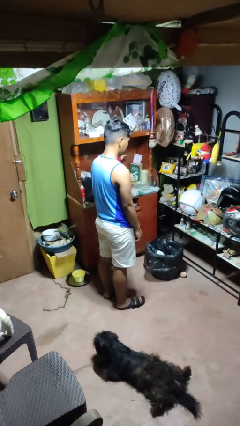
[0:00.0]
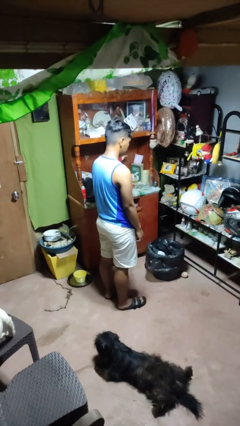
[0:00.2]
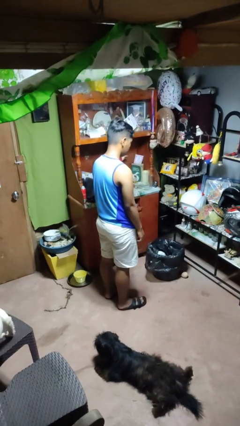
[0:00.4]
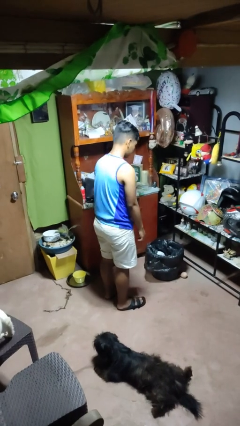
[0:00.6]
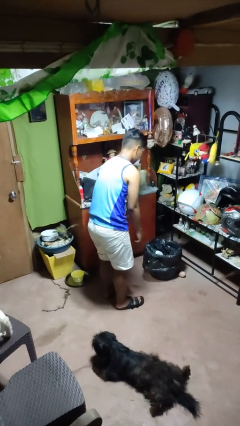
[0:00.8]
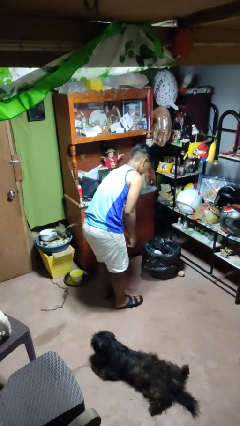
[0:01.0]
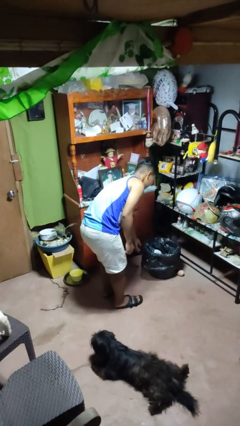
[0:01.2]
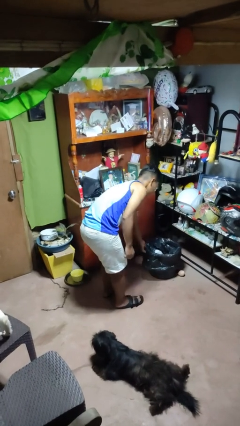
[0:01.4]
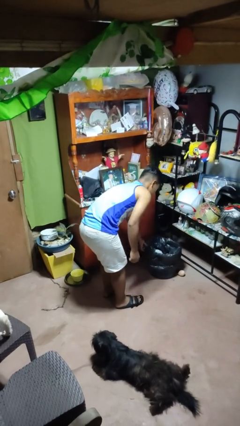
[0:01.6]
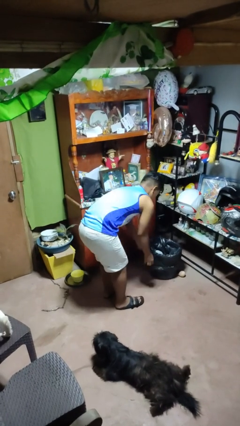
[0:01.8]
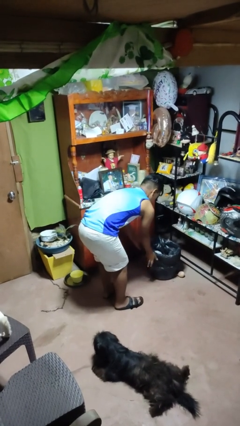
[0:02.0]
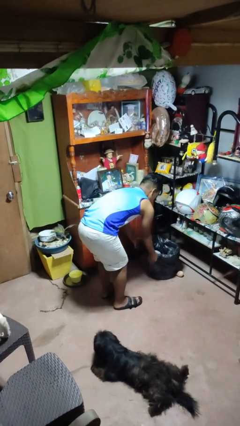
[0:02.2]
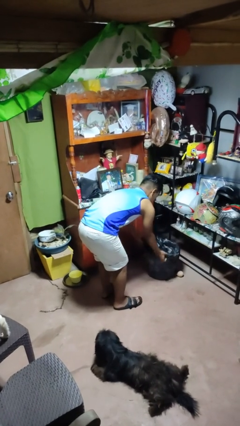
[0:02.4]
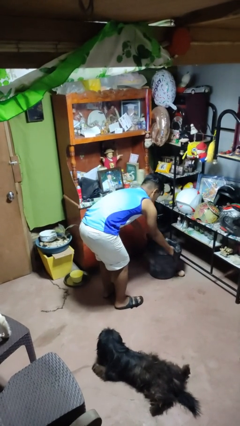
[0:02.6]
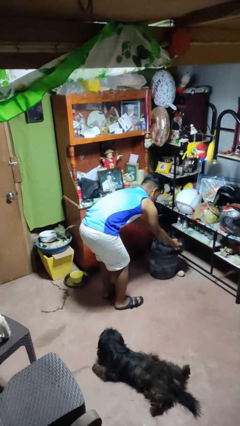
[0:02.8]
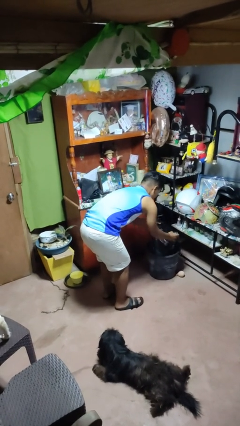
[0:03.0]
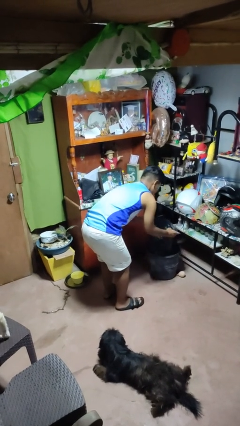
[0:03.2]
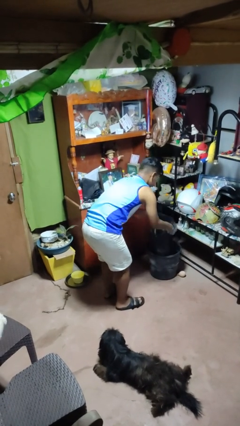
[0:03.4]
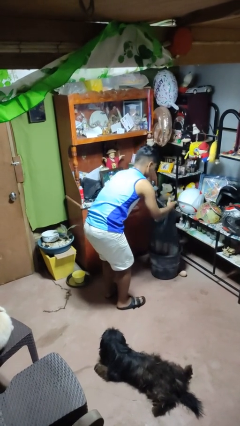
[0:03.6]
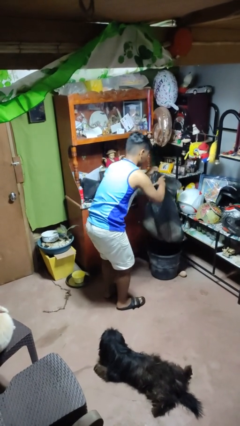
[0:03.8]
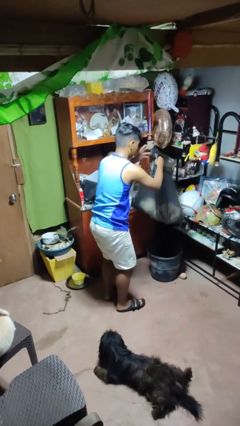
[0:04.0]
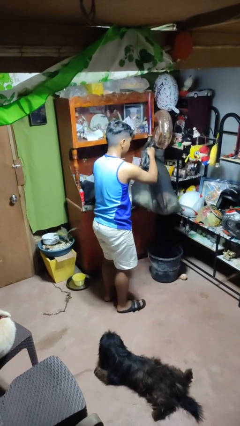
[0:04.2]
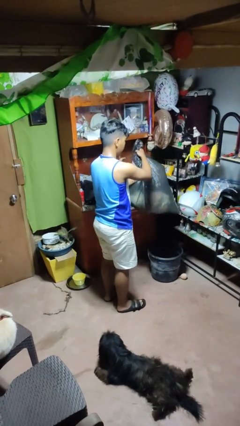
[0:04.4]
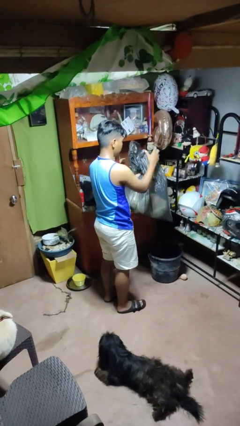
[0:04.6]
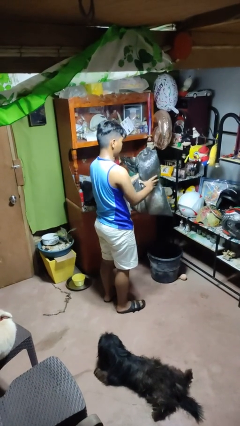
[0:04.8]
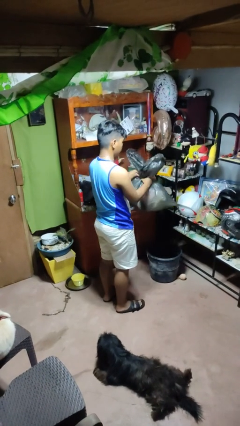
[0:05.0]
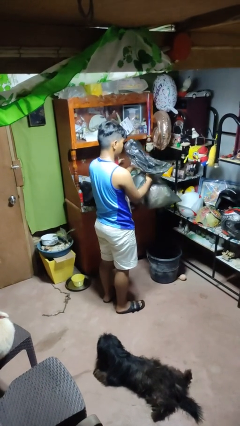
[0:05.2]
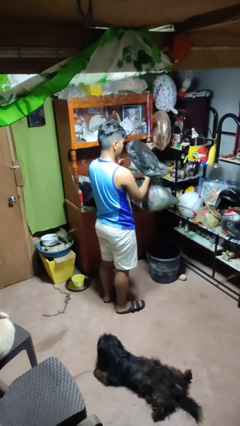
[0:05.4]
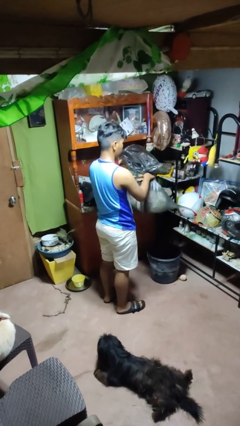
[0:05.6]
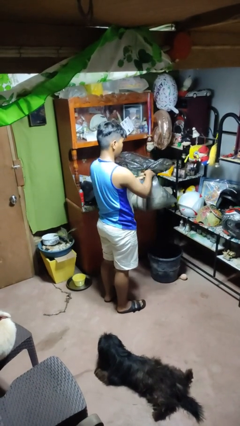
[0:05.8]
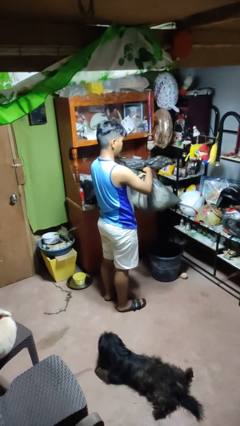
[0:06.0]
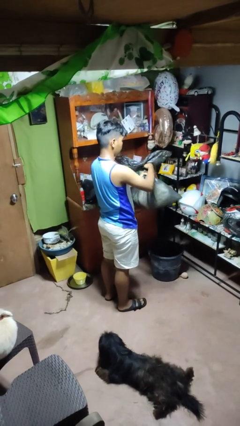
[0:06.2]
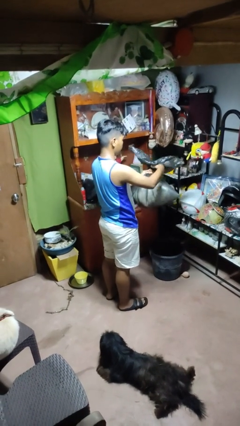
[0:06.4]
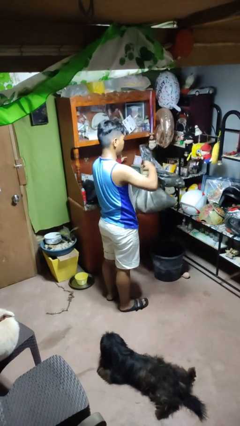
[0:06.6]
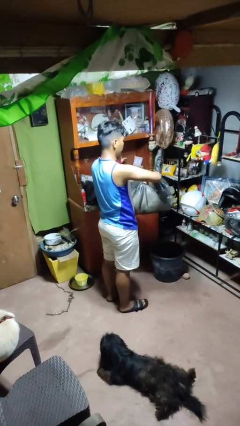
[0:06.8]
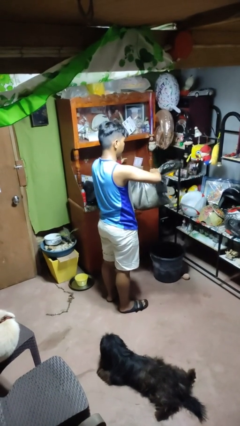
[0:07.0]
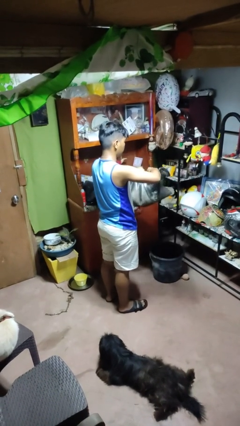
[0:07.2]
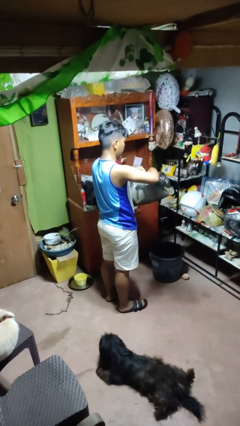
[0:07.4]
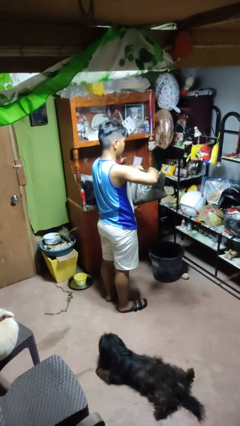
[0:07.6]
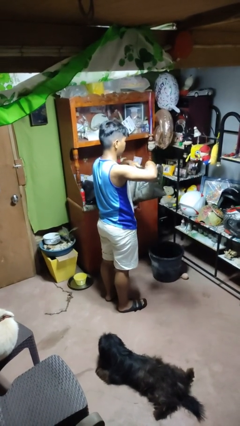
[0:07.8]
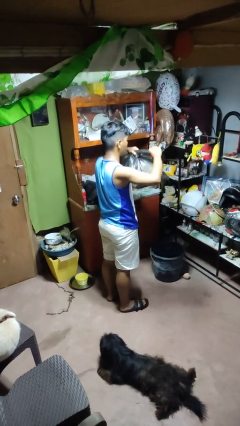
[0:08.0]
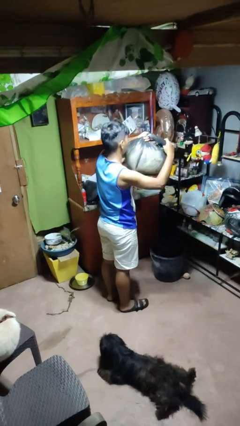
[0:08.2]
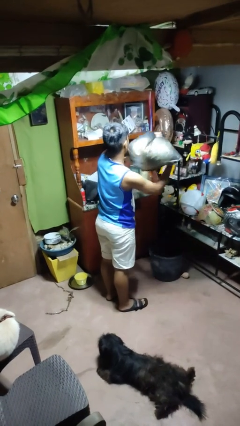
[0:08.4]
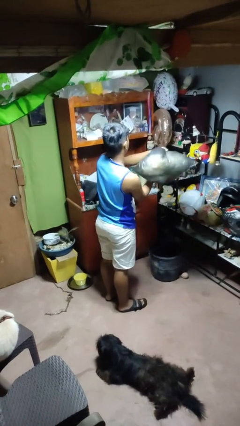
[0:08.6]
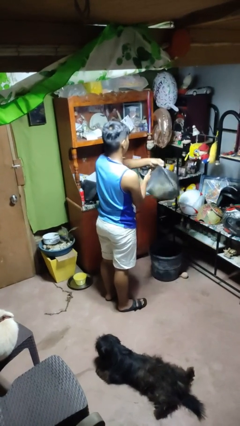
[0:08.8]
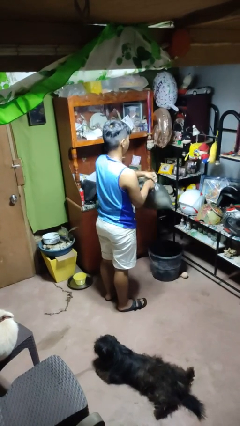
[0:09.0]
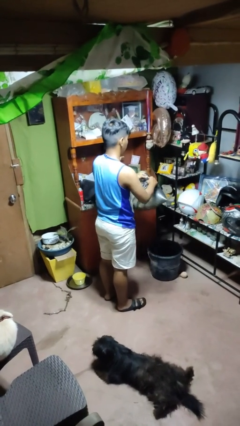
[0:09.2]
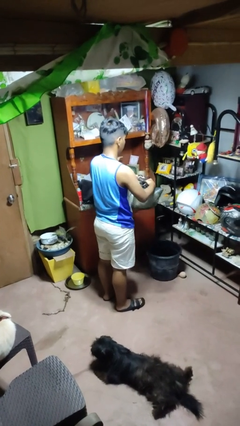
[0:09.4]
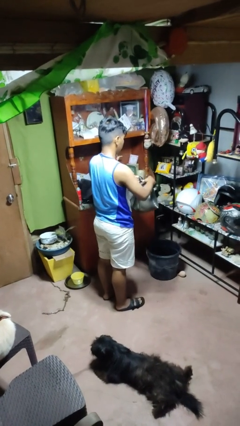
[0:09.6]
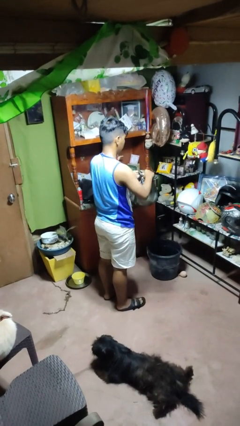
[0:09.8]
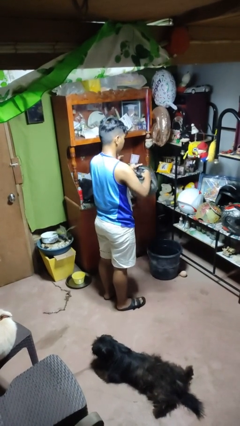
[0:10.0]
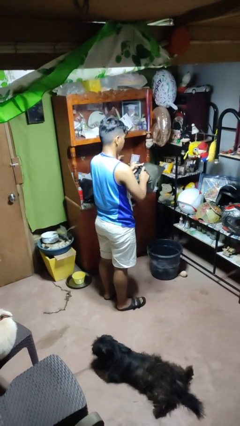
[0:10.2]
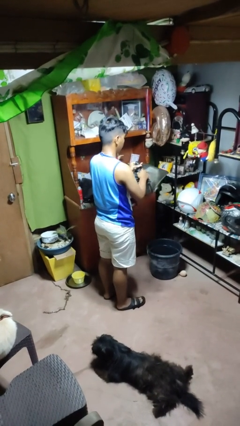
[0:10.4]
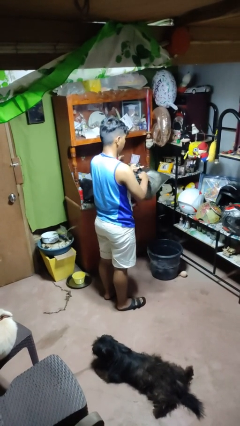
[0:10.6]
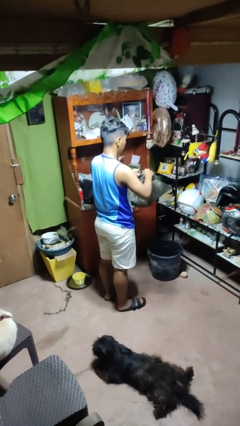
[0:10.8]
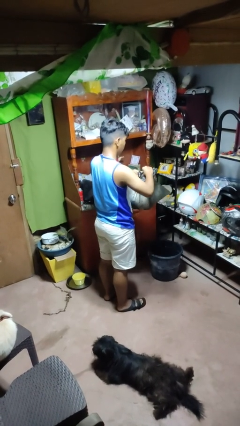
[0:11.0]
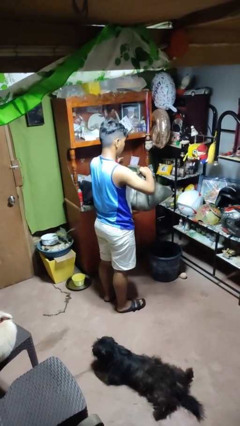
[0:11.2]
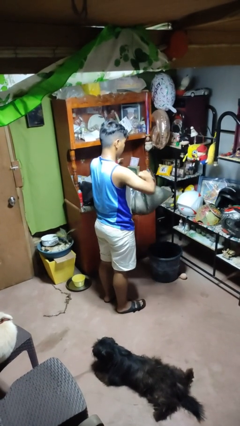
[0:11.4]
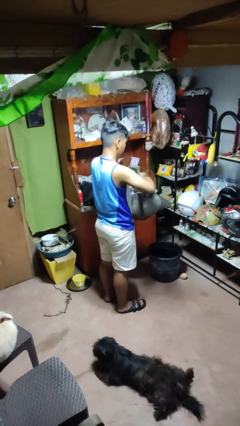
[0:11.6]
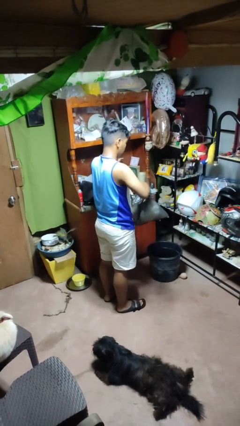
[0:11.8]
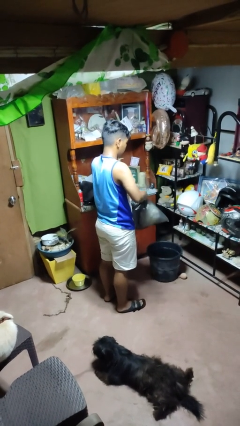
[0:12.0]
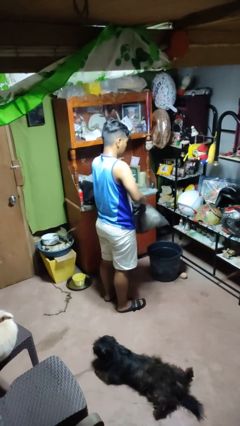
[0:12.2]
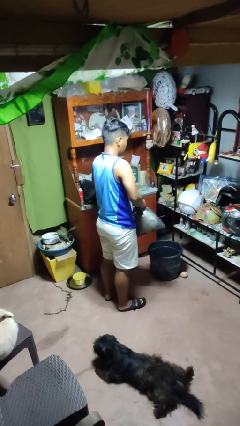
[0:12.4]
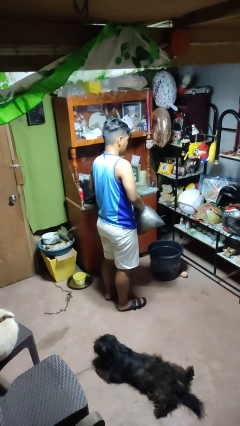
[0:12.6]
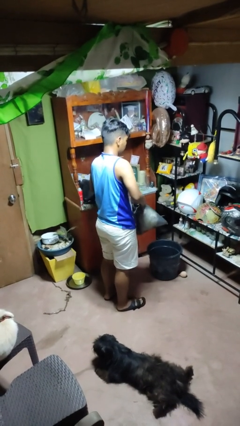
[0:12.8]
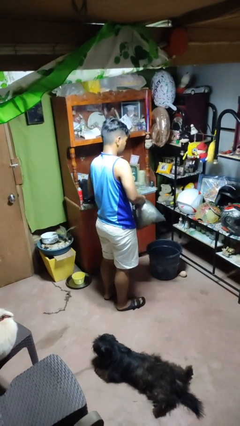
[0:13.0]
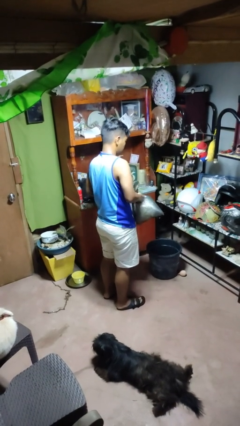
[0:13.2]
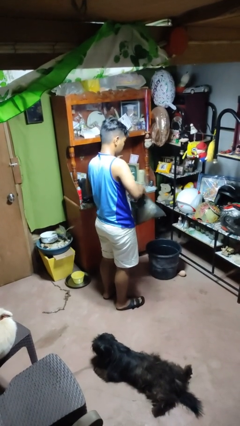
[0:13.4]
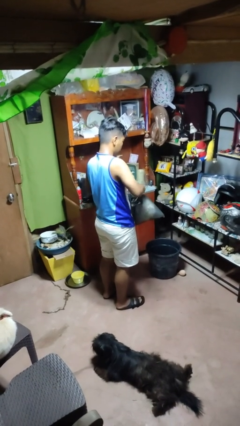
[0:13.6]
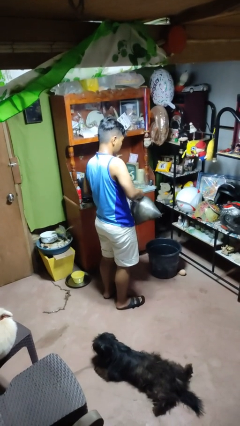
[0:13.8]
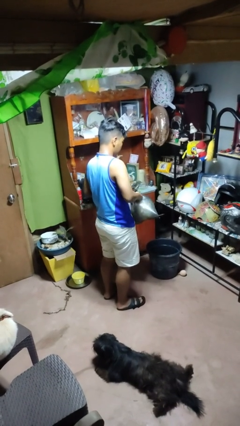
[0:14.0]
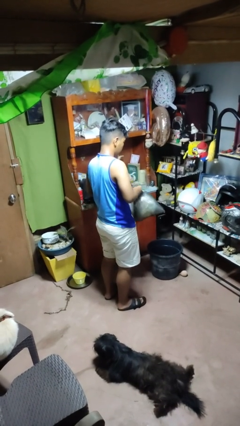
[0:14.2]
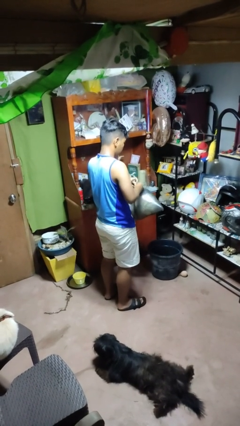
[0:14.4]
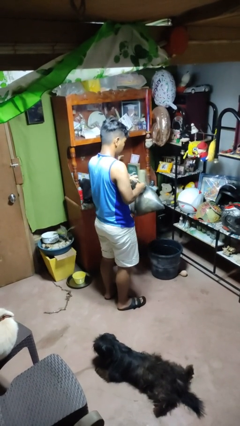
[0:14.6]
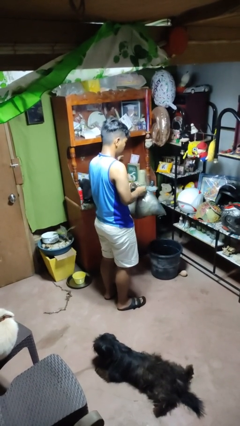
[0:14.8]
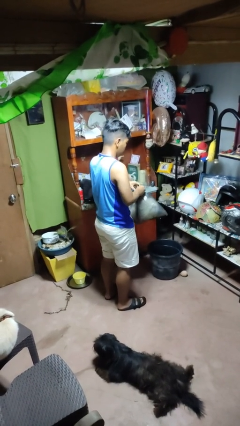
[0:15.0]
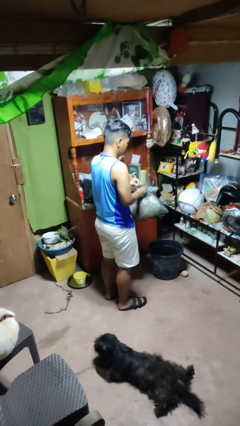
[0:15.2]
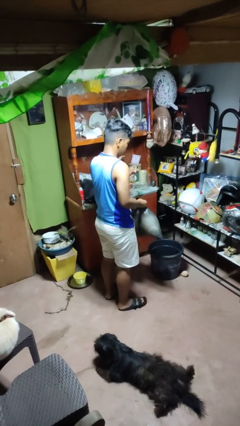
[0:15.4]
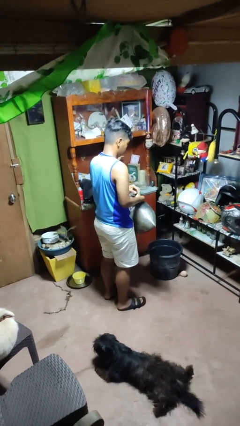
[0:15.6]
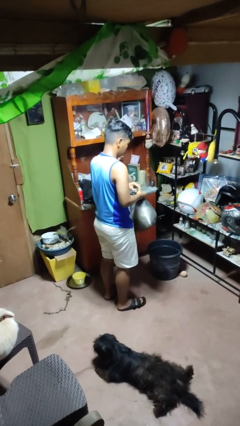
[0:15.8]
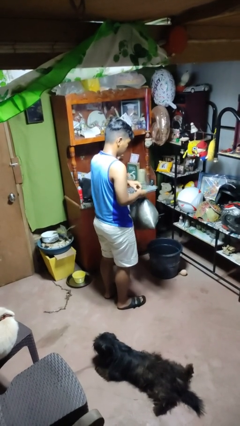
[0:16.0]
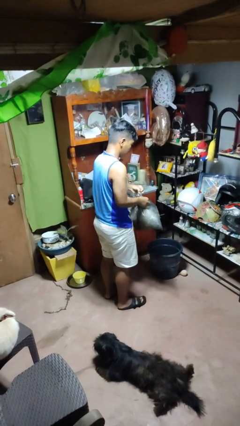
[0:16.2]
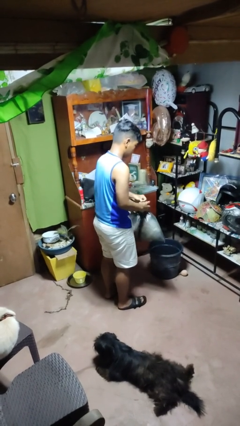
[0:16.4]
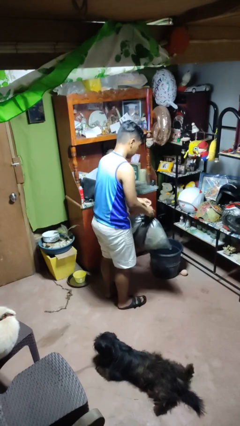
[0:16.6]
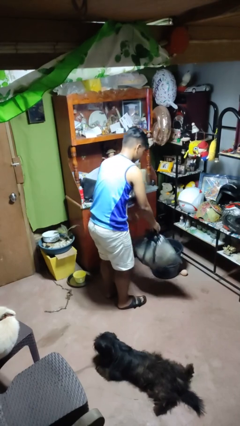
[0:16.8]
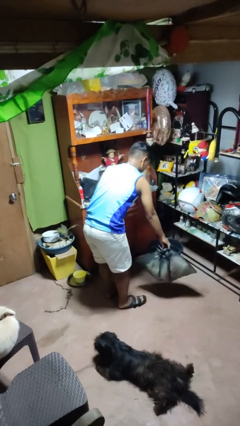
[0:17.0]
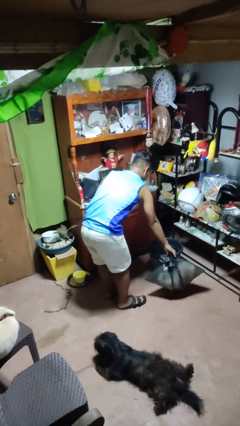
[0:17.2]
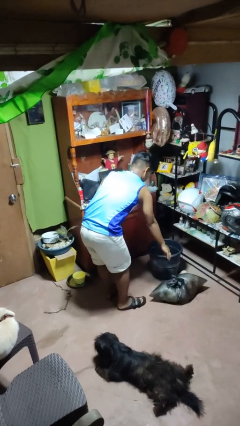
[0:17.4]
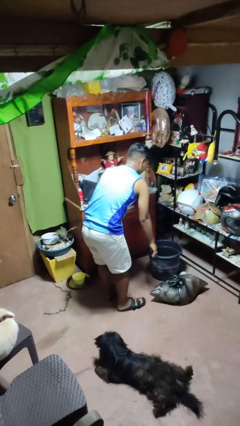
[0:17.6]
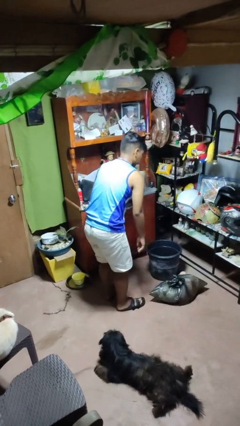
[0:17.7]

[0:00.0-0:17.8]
person removes trashbag from trashcan

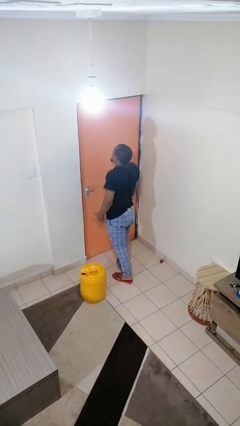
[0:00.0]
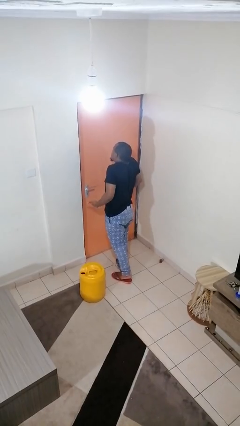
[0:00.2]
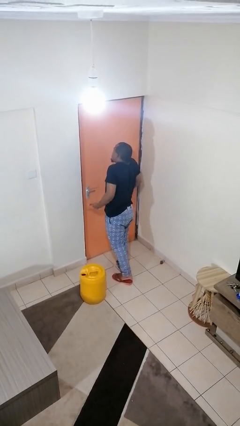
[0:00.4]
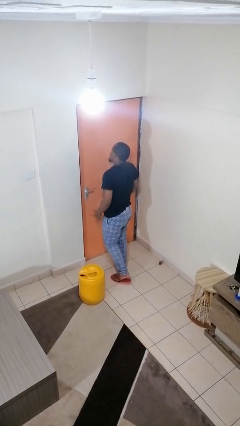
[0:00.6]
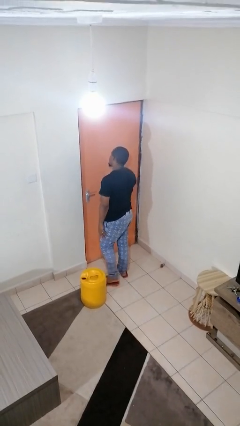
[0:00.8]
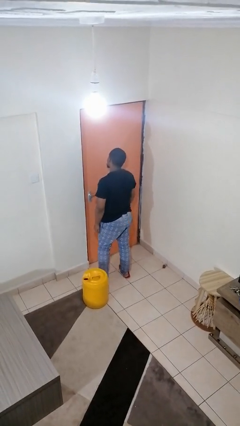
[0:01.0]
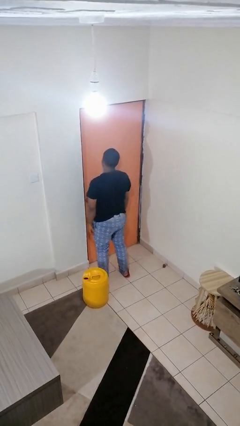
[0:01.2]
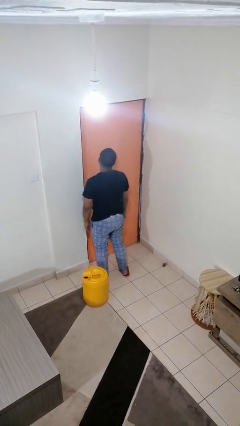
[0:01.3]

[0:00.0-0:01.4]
person shrugs
